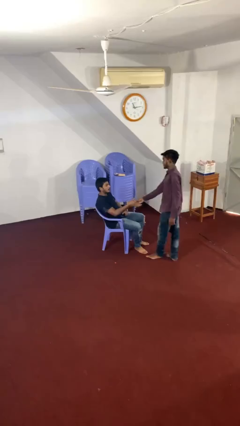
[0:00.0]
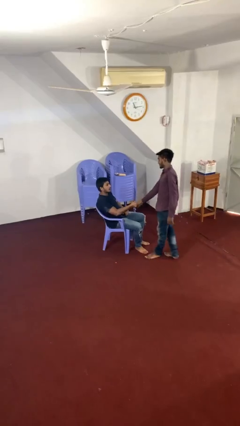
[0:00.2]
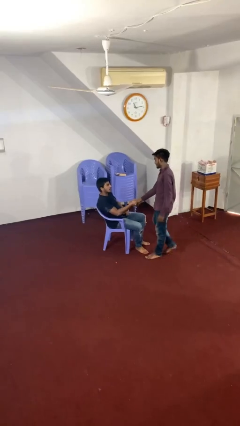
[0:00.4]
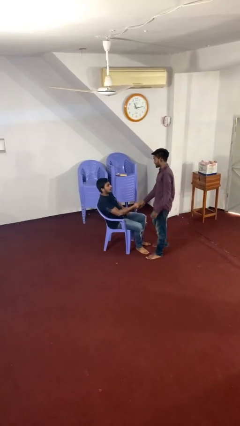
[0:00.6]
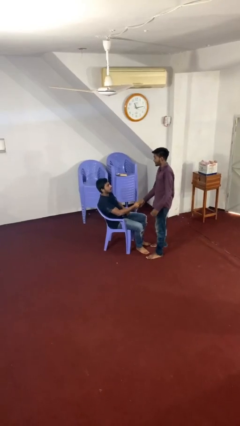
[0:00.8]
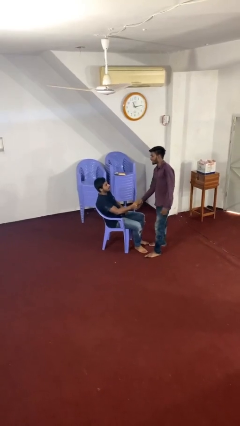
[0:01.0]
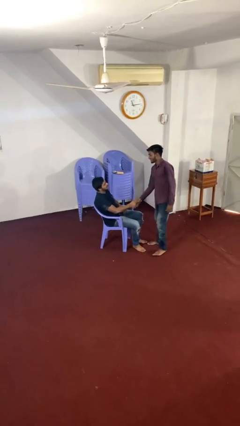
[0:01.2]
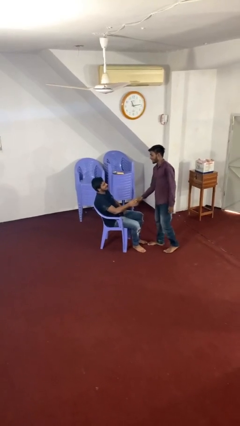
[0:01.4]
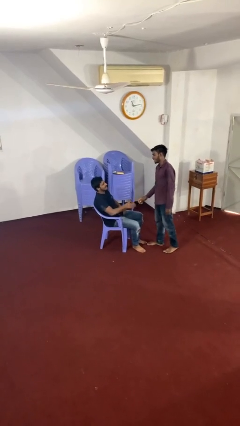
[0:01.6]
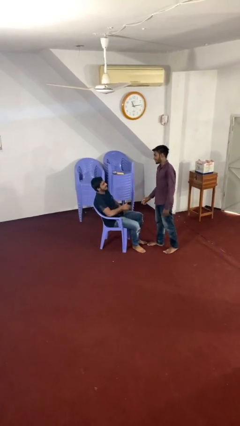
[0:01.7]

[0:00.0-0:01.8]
person shakes hand

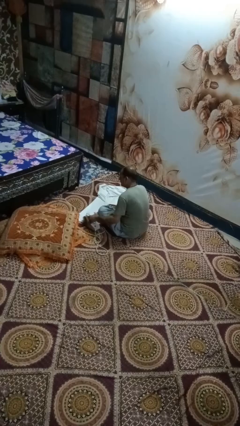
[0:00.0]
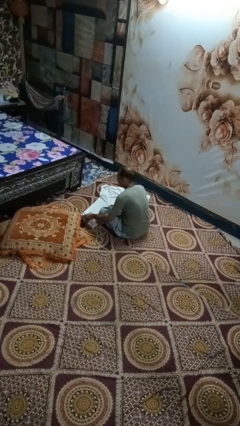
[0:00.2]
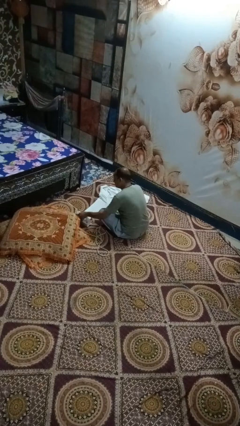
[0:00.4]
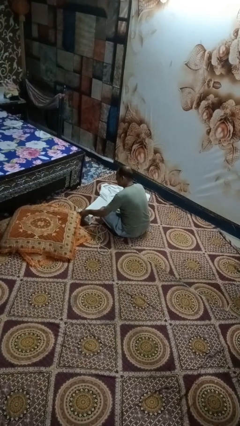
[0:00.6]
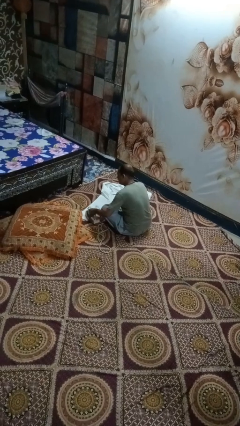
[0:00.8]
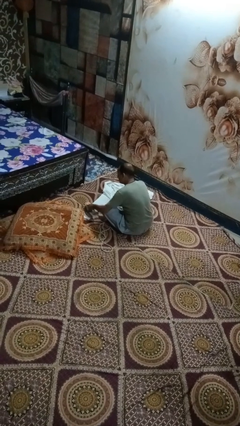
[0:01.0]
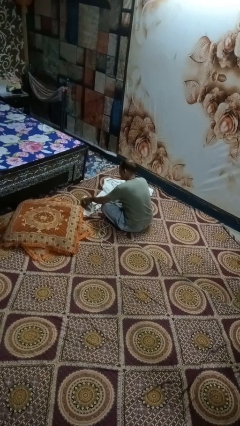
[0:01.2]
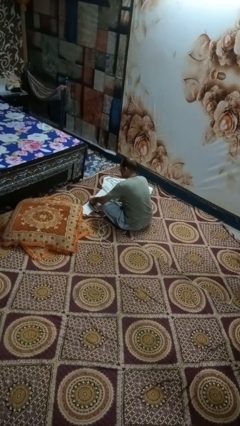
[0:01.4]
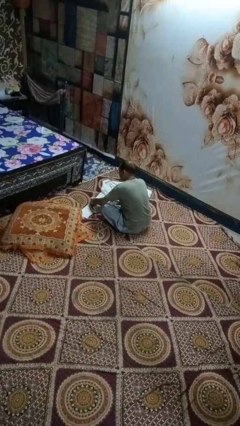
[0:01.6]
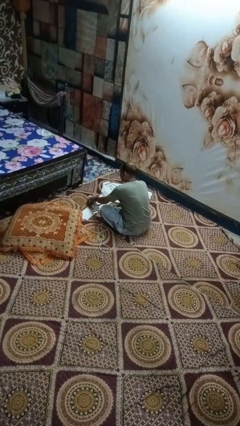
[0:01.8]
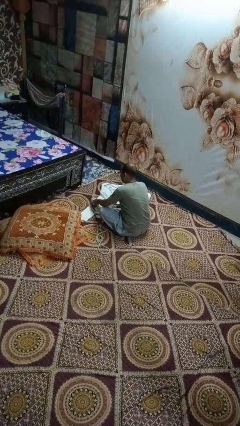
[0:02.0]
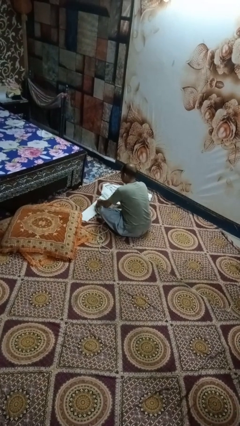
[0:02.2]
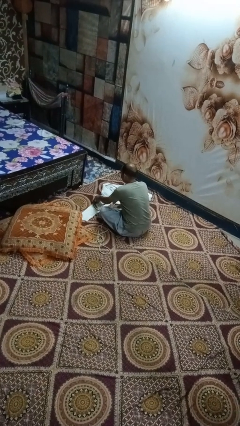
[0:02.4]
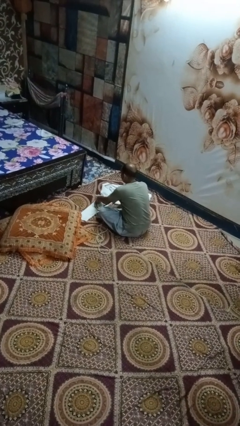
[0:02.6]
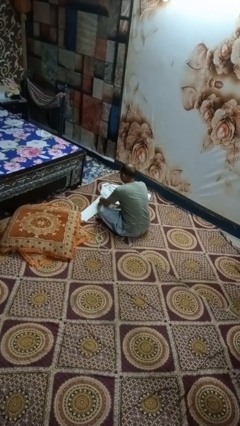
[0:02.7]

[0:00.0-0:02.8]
person irons clothes

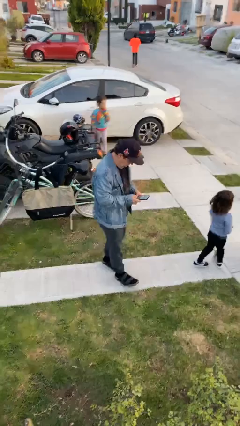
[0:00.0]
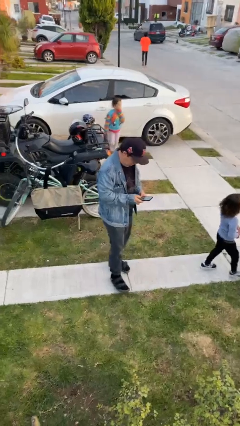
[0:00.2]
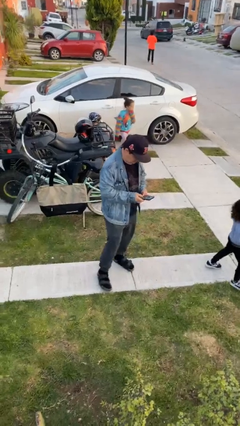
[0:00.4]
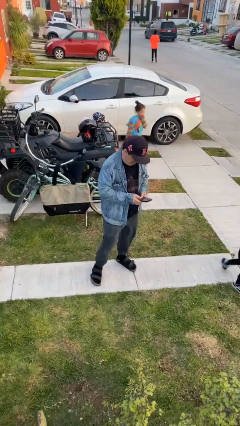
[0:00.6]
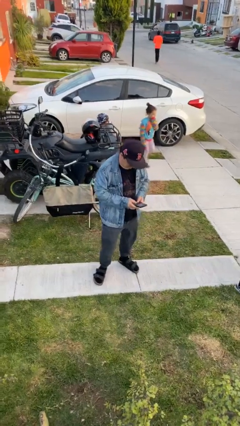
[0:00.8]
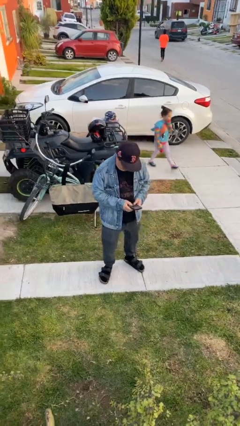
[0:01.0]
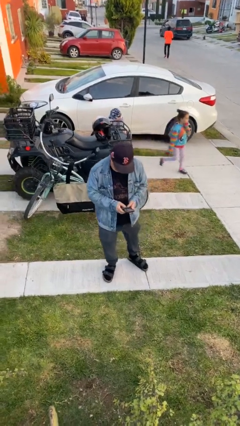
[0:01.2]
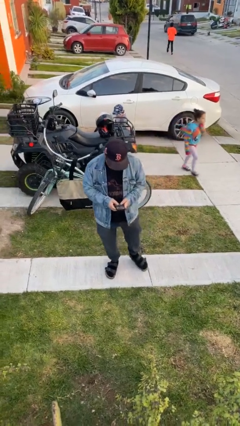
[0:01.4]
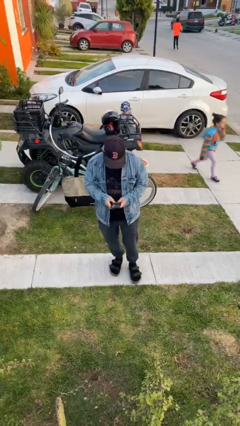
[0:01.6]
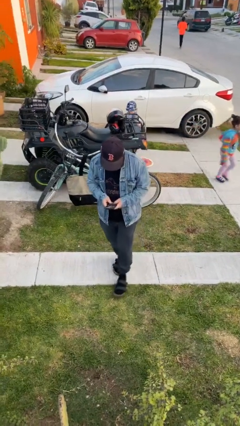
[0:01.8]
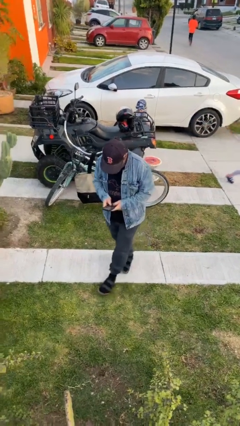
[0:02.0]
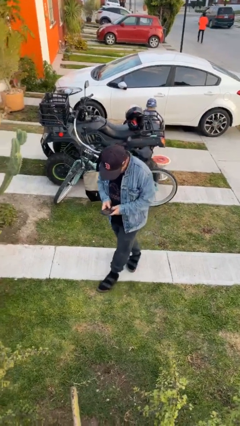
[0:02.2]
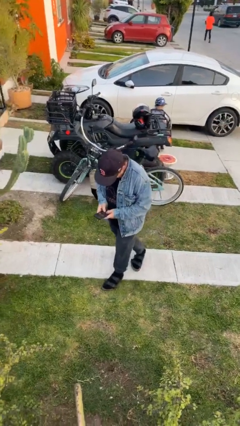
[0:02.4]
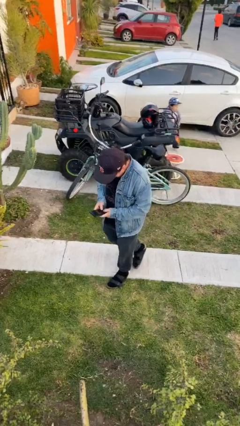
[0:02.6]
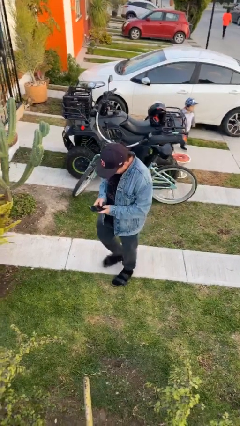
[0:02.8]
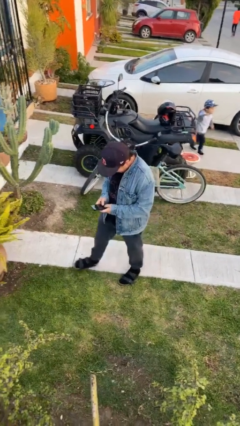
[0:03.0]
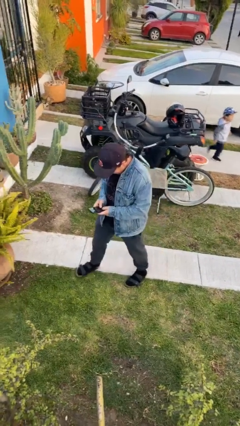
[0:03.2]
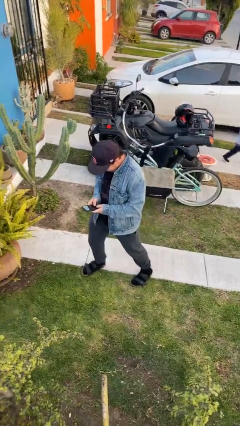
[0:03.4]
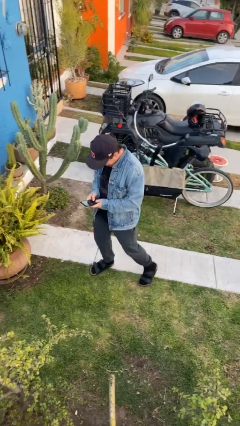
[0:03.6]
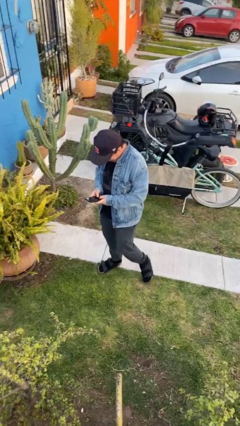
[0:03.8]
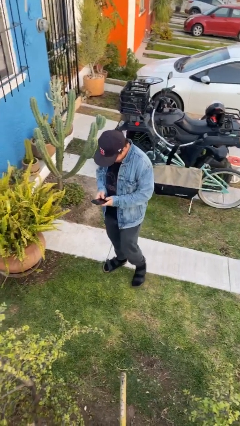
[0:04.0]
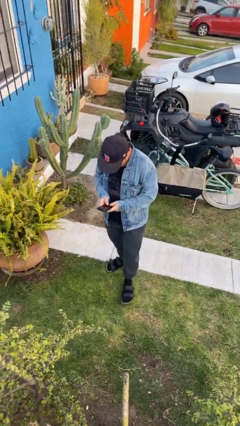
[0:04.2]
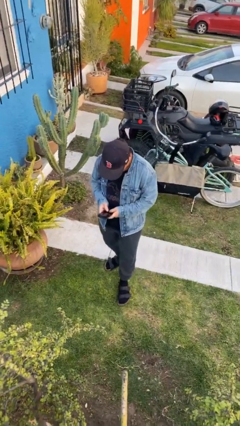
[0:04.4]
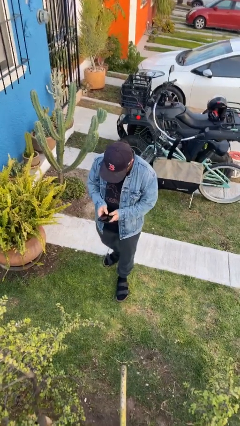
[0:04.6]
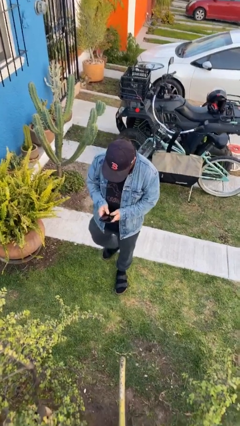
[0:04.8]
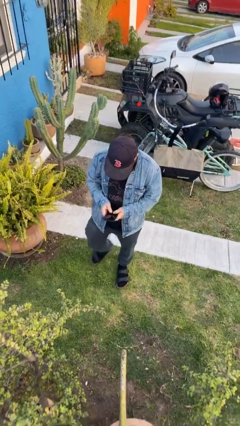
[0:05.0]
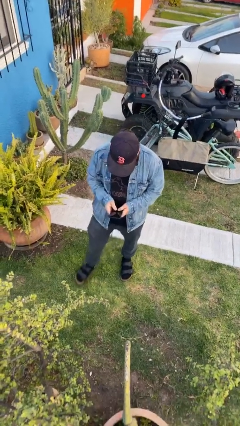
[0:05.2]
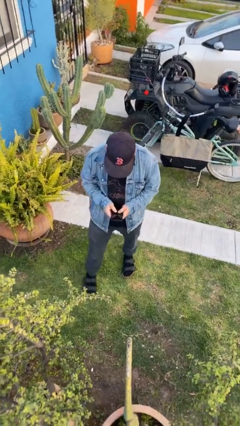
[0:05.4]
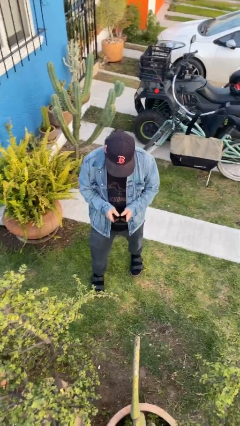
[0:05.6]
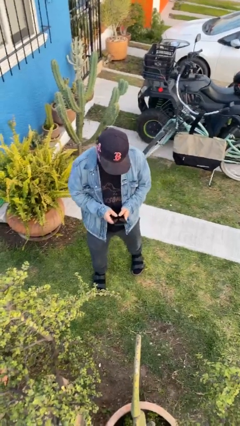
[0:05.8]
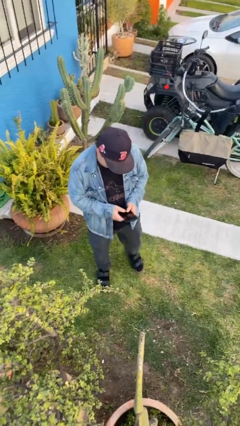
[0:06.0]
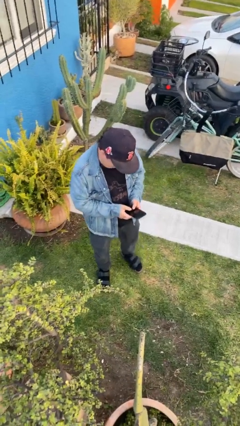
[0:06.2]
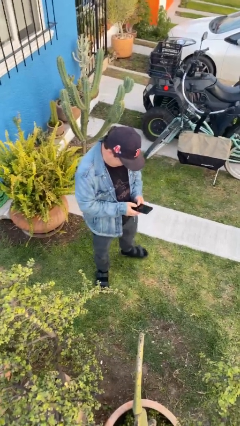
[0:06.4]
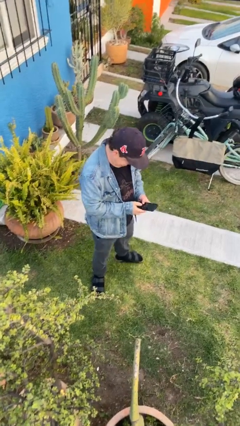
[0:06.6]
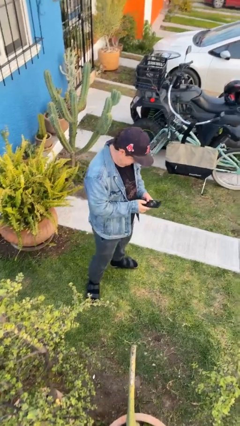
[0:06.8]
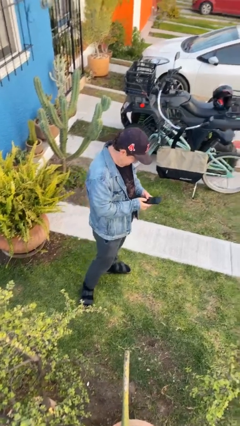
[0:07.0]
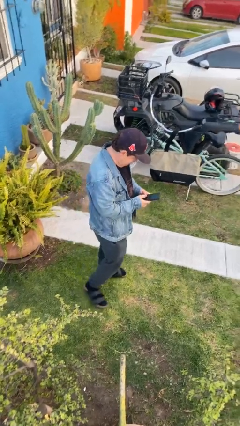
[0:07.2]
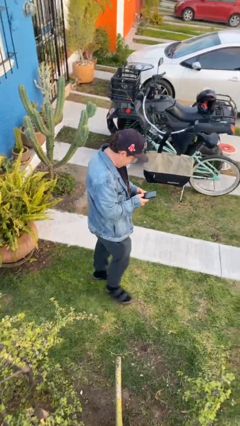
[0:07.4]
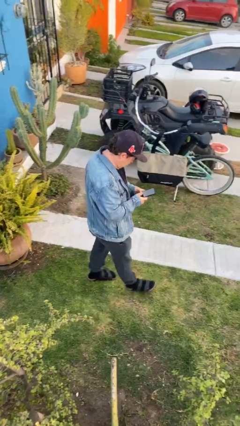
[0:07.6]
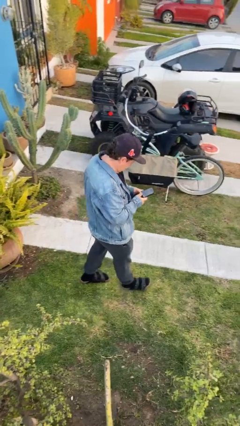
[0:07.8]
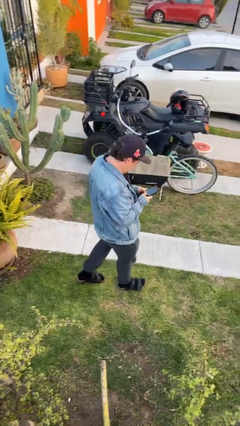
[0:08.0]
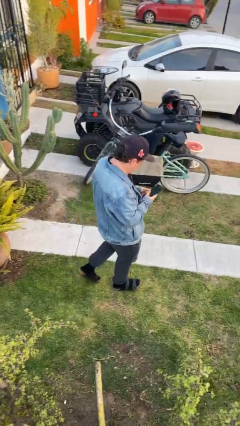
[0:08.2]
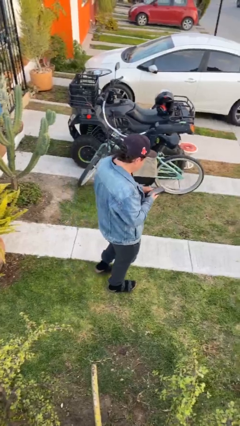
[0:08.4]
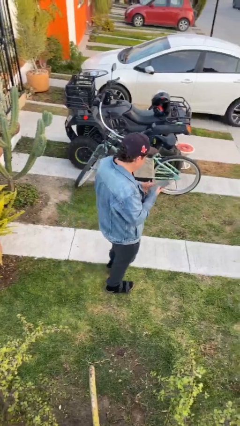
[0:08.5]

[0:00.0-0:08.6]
person texts on phone

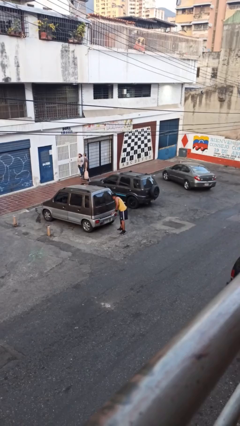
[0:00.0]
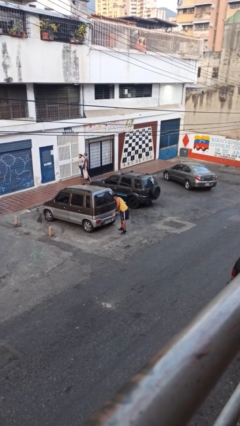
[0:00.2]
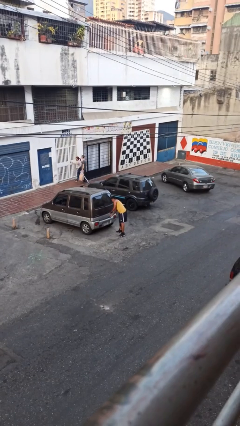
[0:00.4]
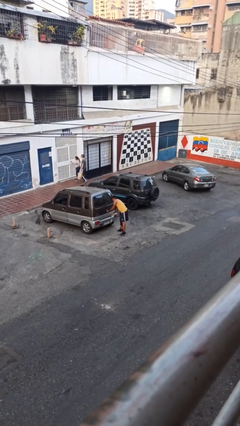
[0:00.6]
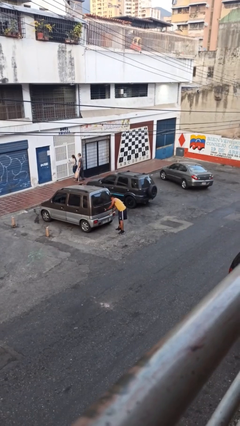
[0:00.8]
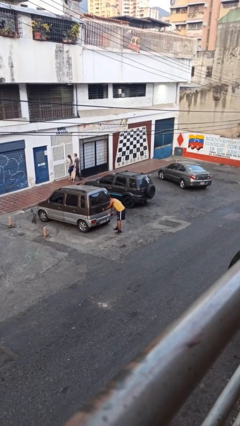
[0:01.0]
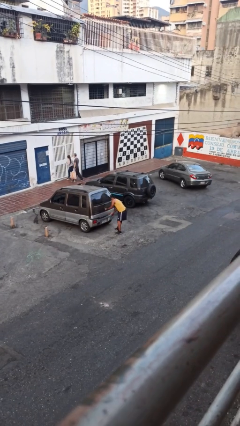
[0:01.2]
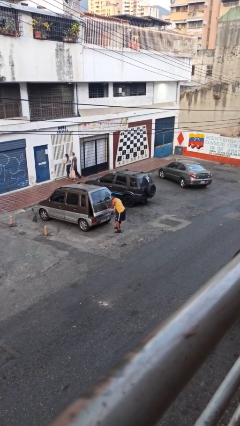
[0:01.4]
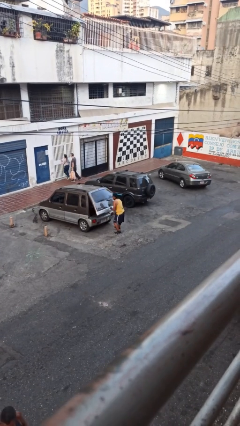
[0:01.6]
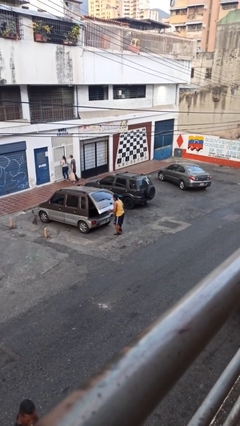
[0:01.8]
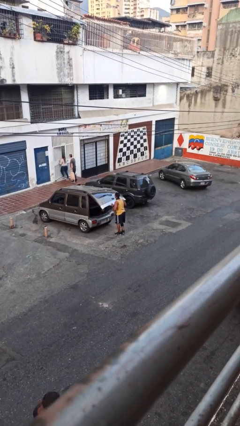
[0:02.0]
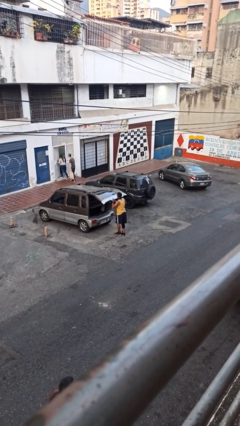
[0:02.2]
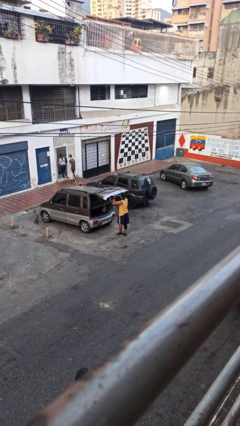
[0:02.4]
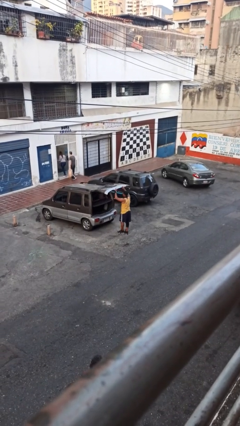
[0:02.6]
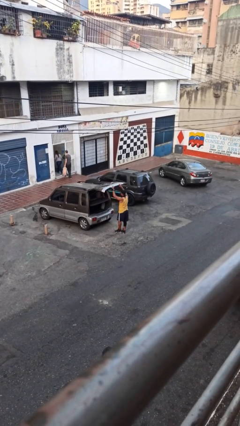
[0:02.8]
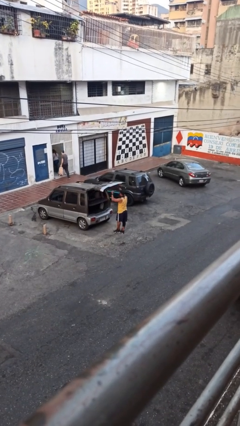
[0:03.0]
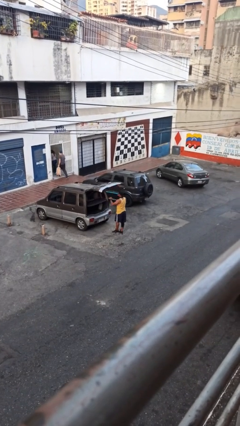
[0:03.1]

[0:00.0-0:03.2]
person opens car trunk

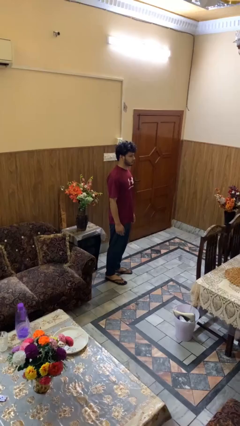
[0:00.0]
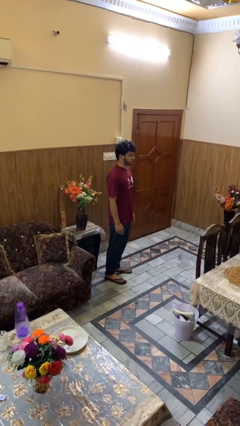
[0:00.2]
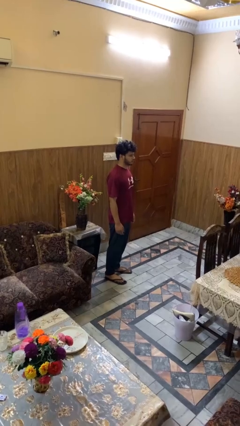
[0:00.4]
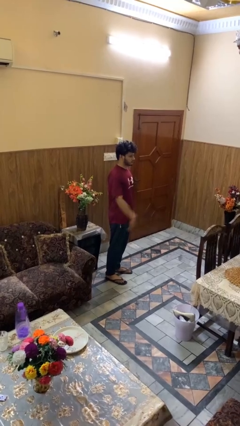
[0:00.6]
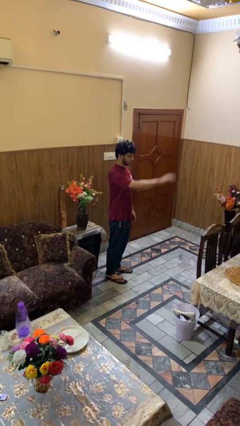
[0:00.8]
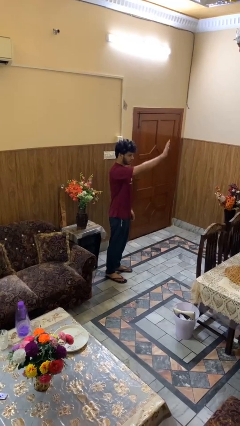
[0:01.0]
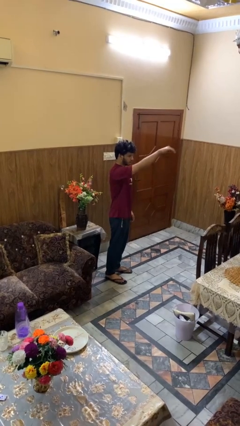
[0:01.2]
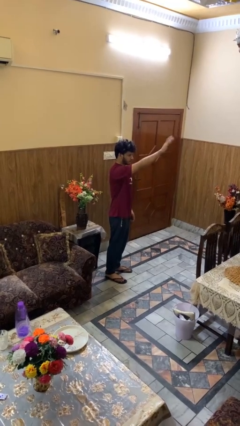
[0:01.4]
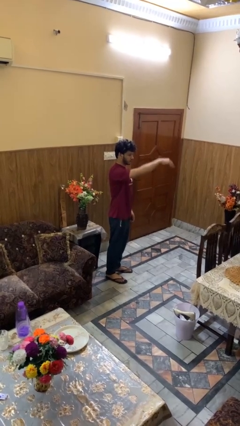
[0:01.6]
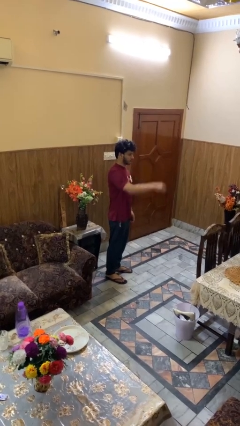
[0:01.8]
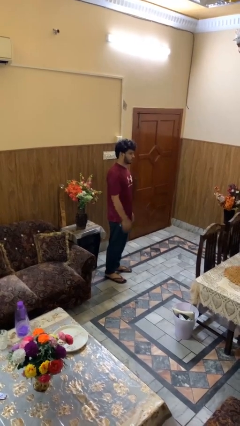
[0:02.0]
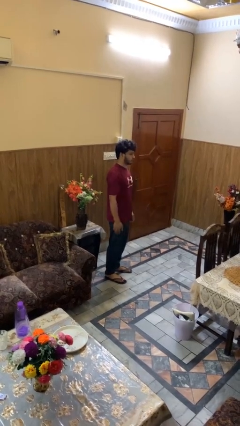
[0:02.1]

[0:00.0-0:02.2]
person gestures come here
